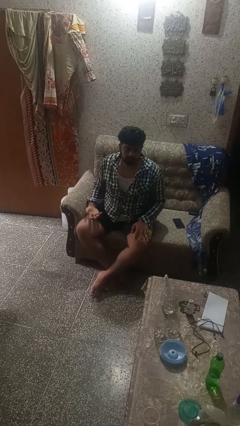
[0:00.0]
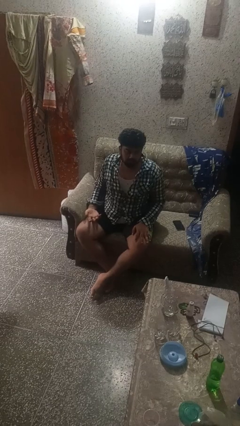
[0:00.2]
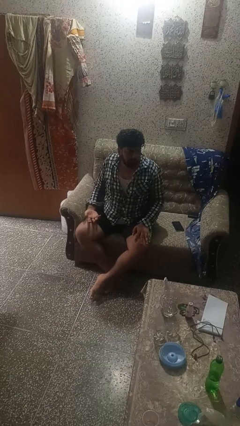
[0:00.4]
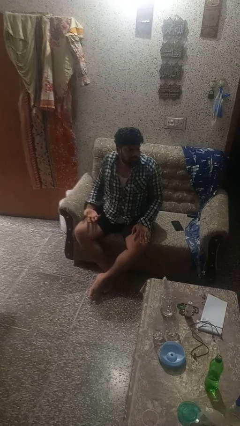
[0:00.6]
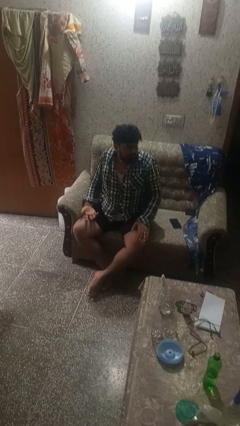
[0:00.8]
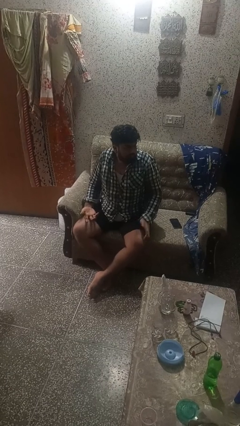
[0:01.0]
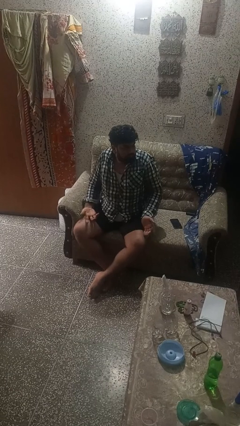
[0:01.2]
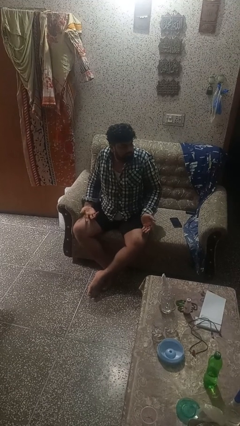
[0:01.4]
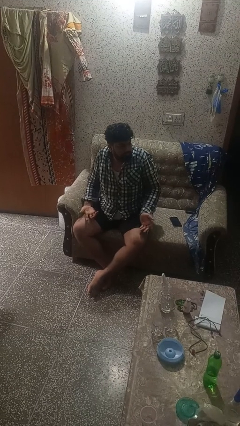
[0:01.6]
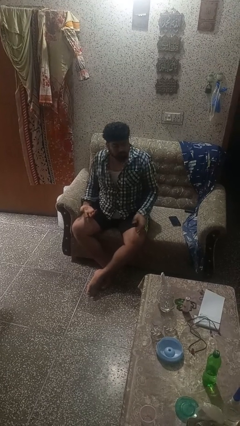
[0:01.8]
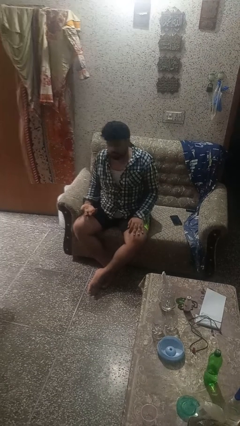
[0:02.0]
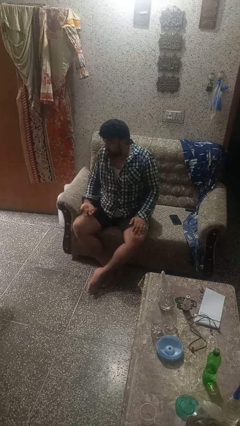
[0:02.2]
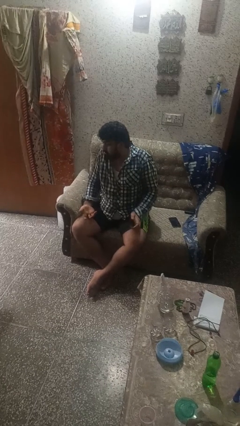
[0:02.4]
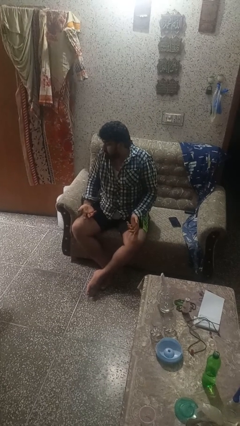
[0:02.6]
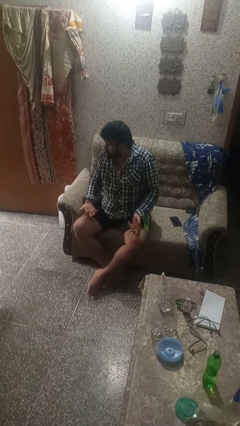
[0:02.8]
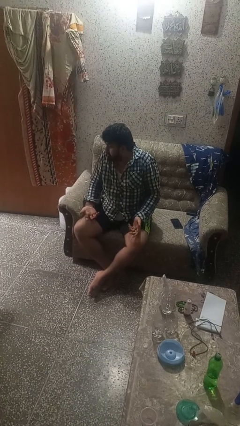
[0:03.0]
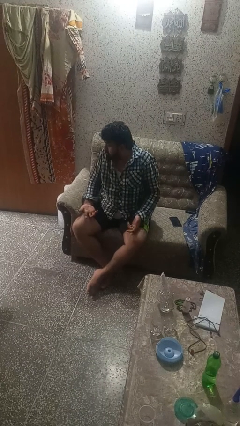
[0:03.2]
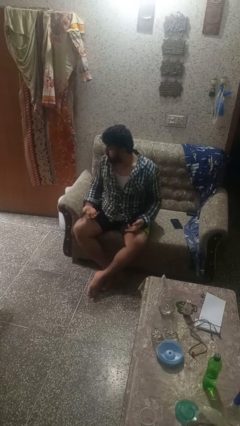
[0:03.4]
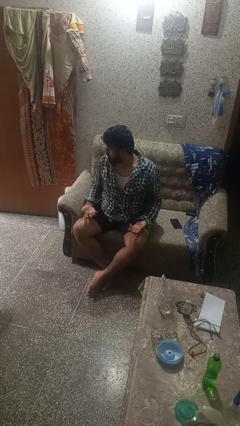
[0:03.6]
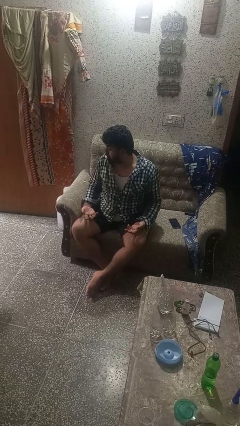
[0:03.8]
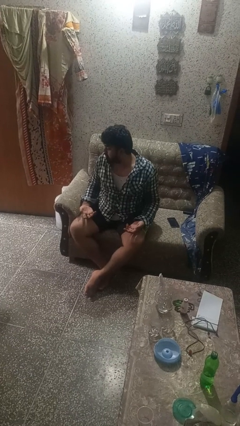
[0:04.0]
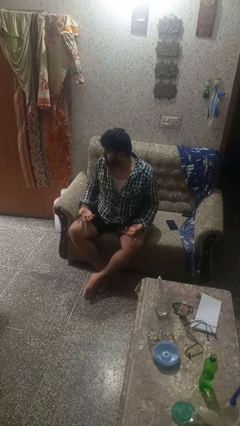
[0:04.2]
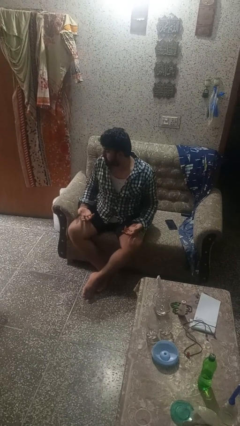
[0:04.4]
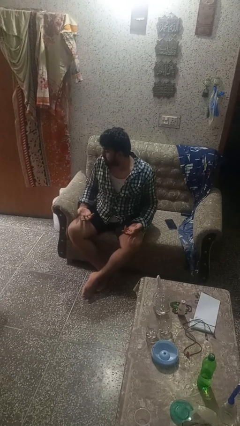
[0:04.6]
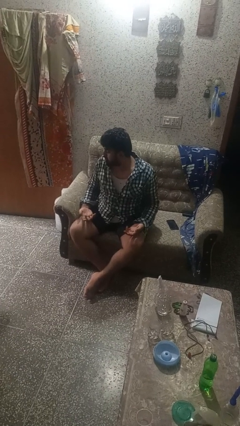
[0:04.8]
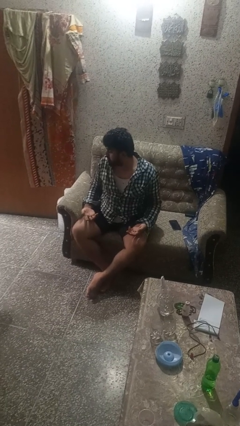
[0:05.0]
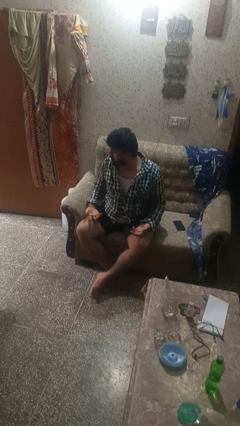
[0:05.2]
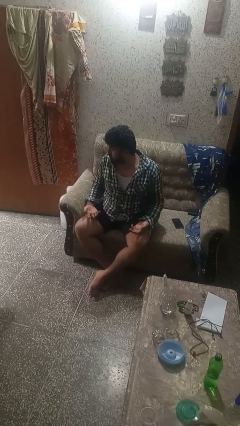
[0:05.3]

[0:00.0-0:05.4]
person shrugs

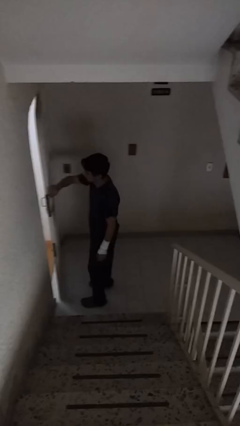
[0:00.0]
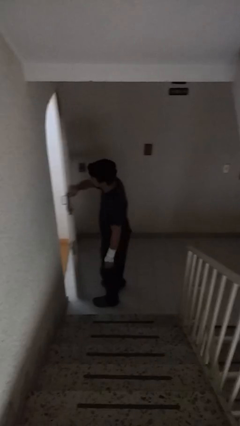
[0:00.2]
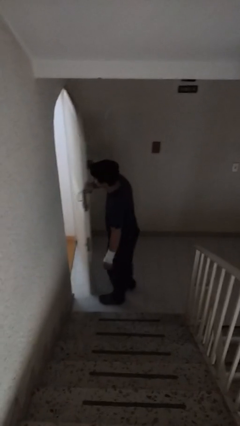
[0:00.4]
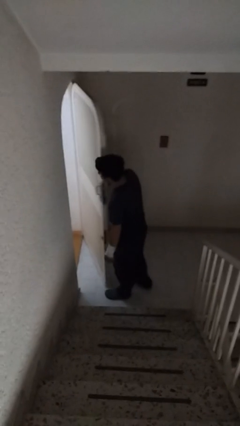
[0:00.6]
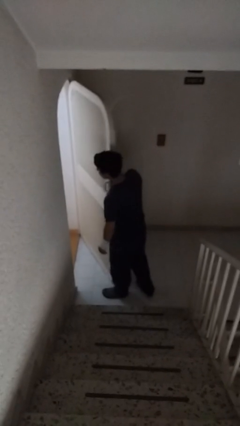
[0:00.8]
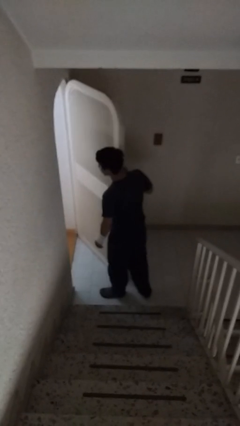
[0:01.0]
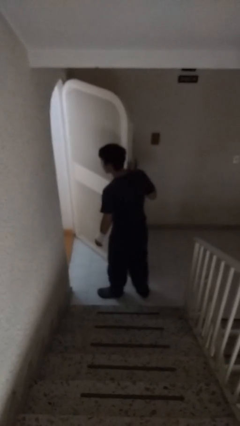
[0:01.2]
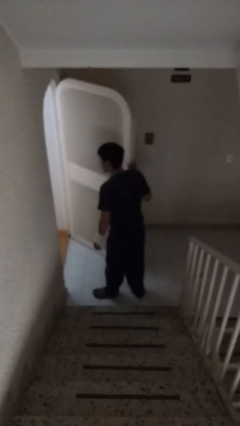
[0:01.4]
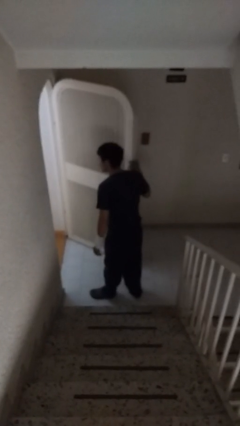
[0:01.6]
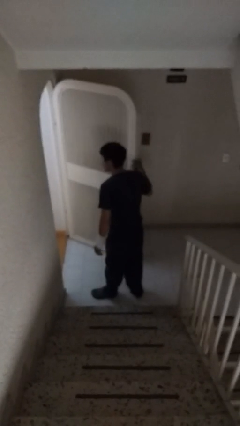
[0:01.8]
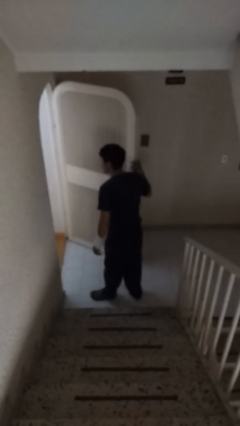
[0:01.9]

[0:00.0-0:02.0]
person opens facility door

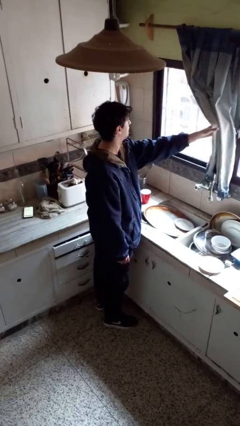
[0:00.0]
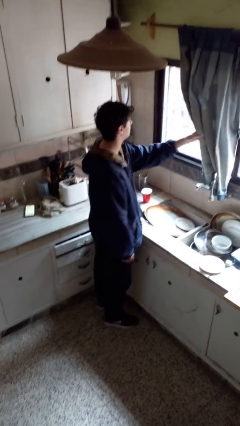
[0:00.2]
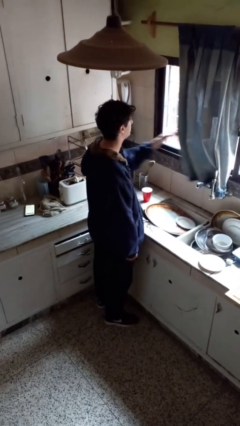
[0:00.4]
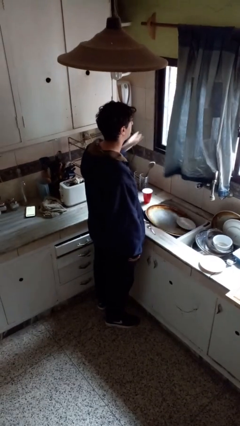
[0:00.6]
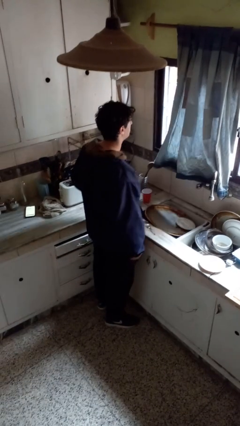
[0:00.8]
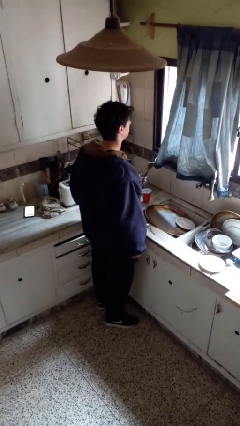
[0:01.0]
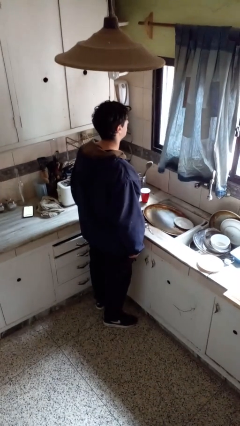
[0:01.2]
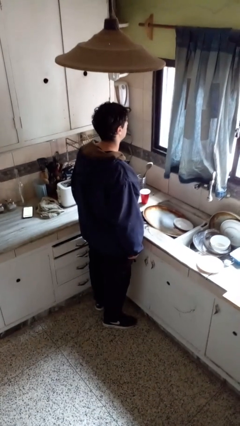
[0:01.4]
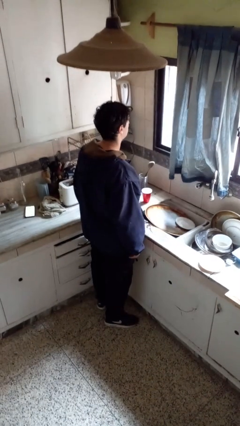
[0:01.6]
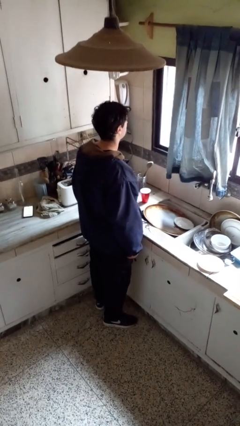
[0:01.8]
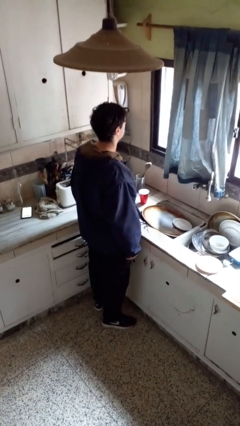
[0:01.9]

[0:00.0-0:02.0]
person closes curtains

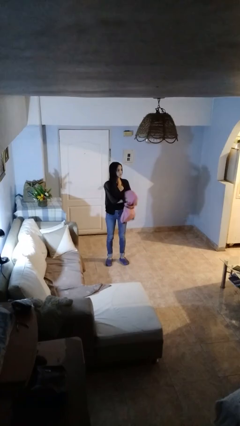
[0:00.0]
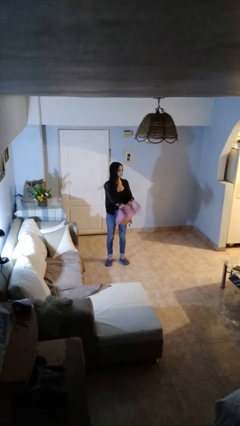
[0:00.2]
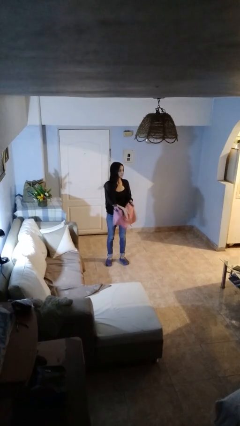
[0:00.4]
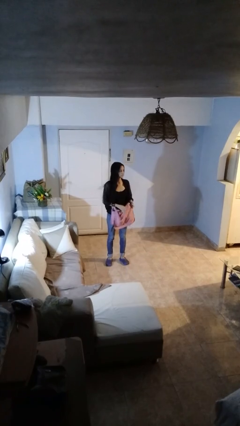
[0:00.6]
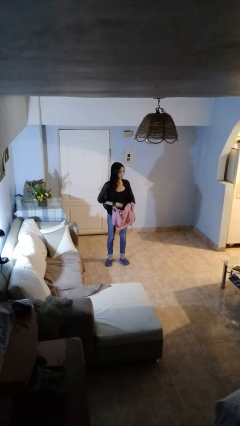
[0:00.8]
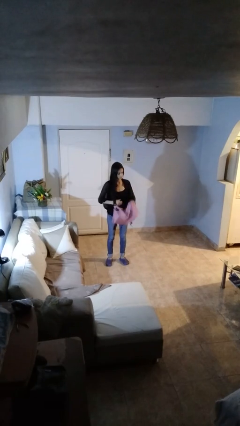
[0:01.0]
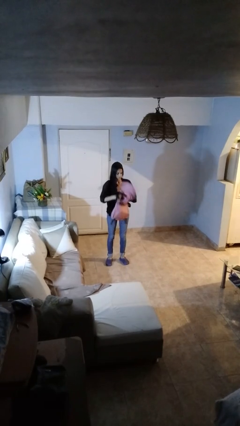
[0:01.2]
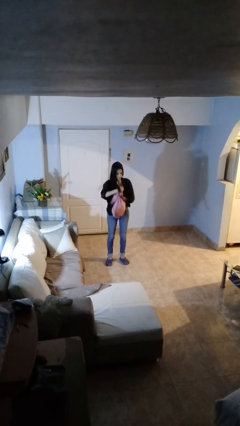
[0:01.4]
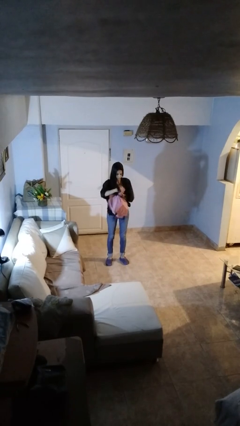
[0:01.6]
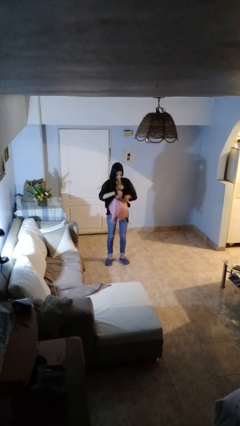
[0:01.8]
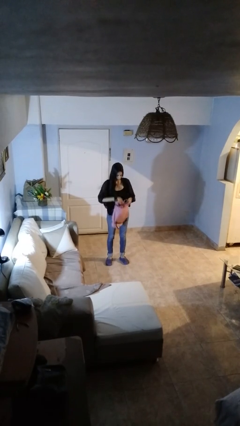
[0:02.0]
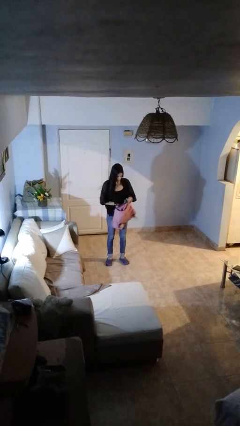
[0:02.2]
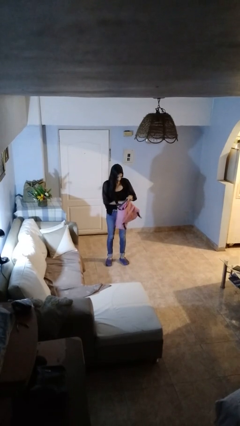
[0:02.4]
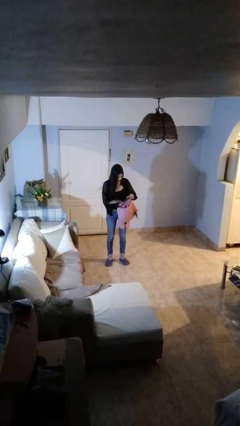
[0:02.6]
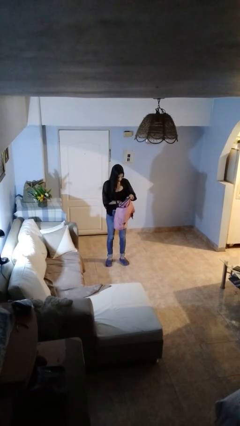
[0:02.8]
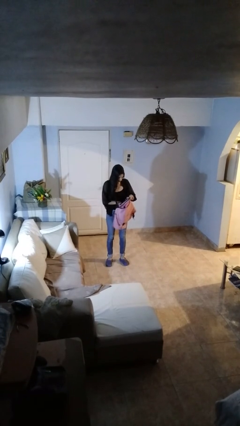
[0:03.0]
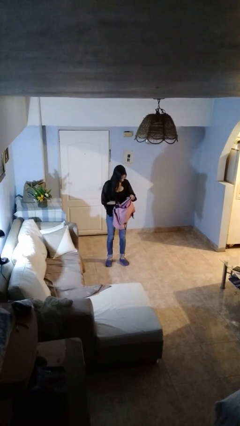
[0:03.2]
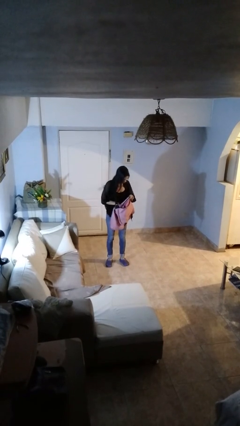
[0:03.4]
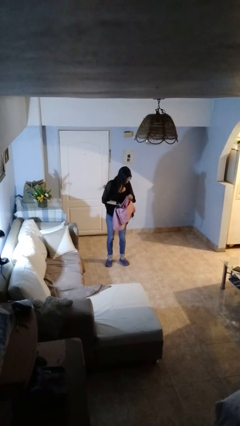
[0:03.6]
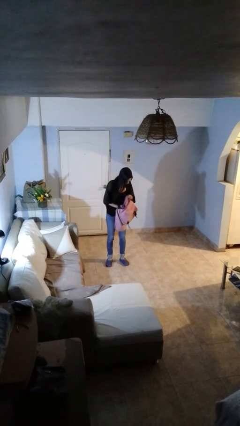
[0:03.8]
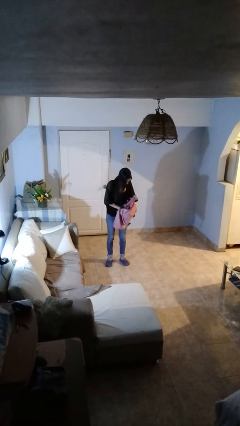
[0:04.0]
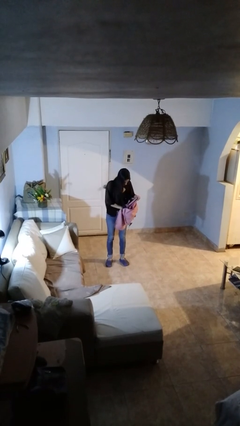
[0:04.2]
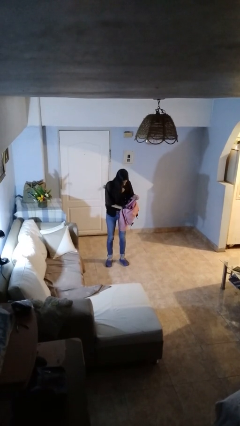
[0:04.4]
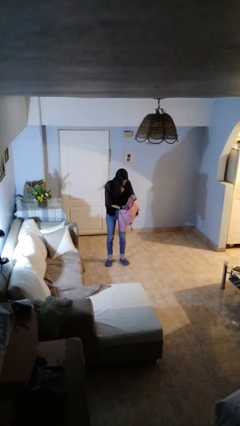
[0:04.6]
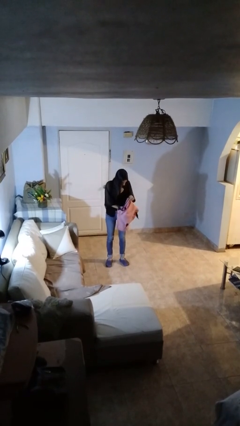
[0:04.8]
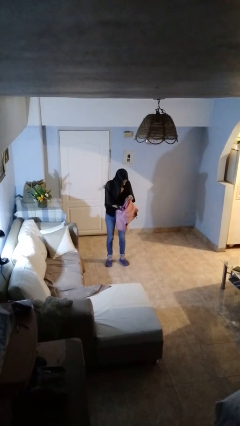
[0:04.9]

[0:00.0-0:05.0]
person searches in backpack

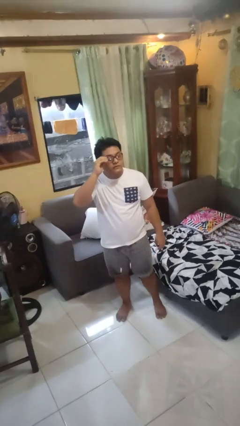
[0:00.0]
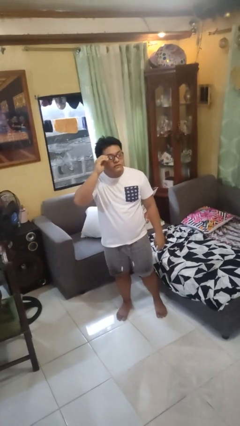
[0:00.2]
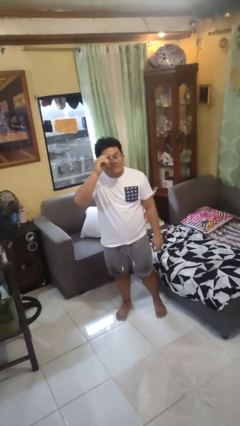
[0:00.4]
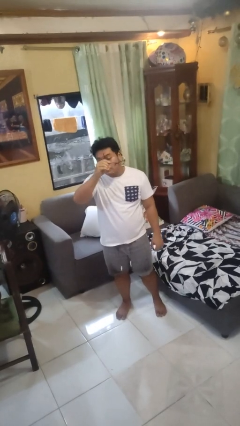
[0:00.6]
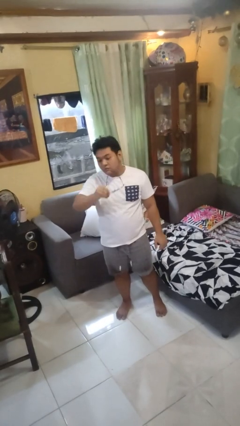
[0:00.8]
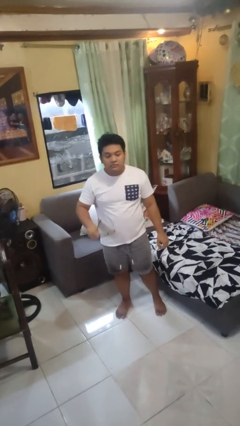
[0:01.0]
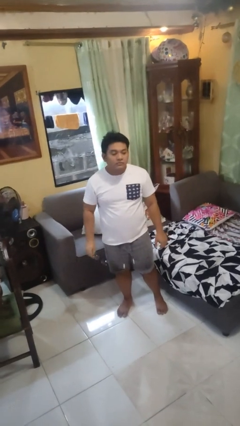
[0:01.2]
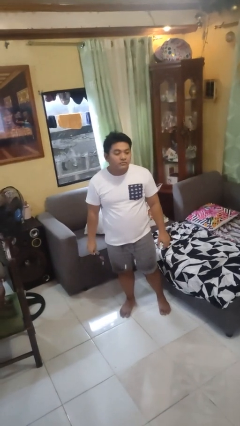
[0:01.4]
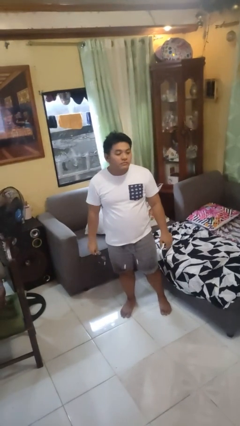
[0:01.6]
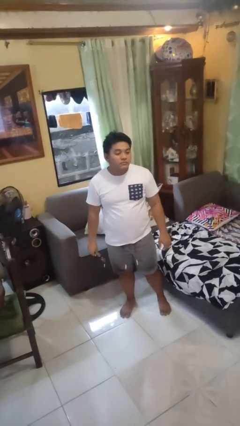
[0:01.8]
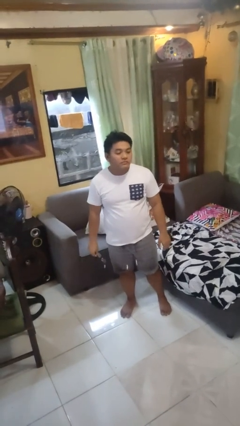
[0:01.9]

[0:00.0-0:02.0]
person takes off glasses

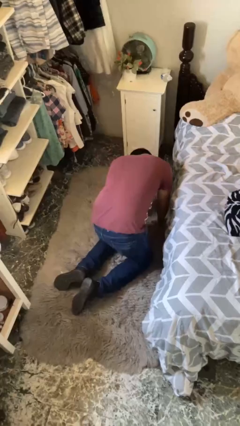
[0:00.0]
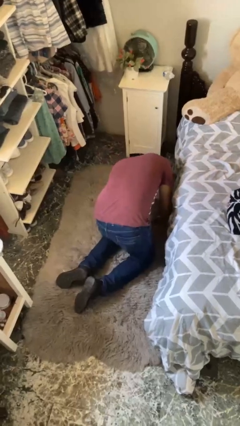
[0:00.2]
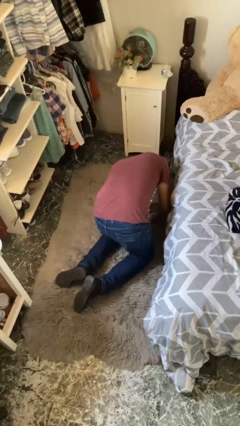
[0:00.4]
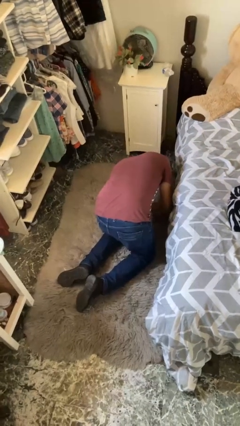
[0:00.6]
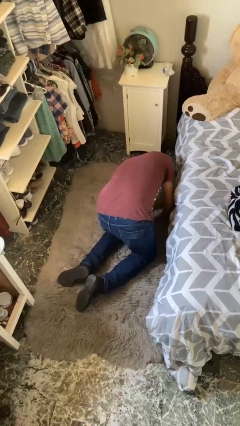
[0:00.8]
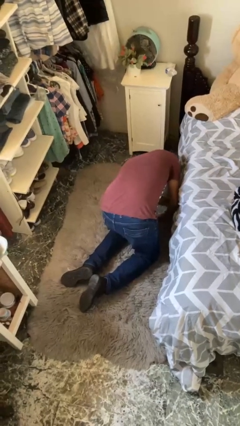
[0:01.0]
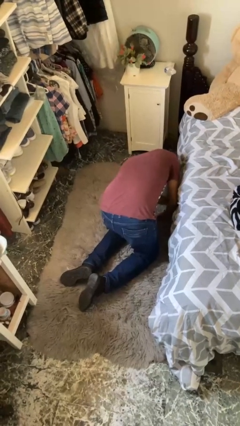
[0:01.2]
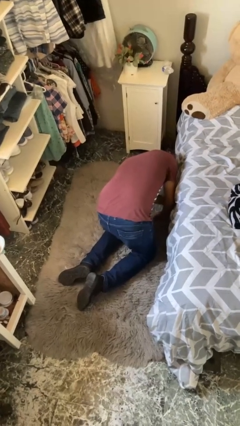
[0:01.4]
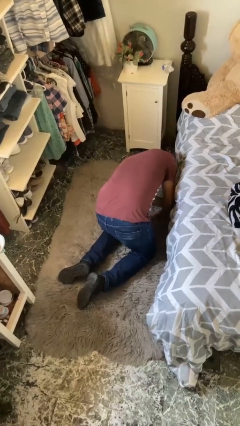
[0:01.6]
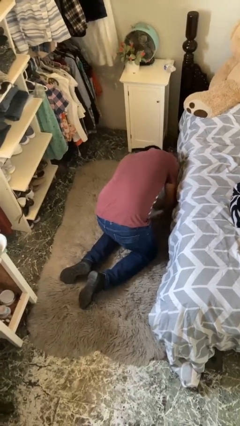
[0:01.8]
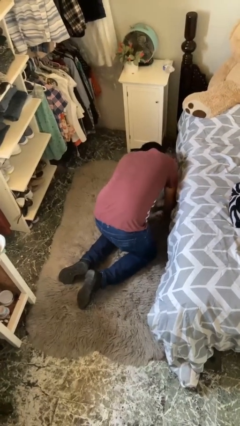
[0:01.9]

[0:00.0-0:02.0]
person searches under bed
